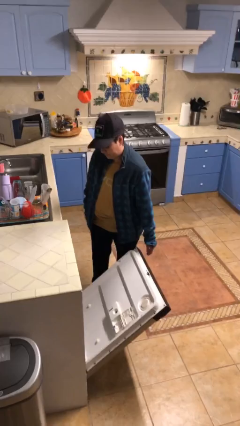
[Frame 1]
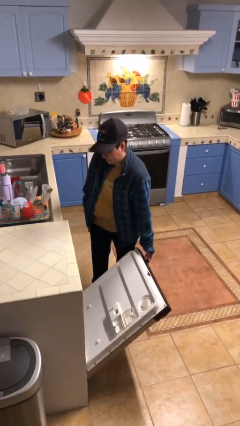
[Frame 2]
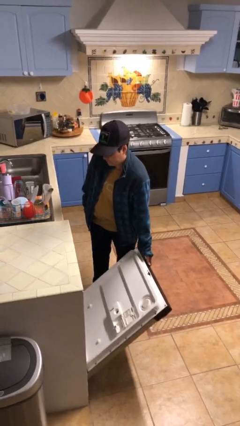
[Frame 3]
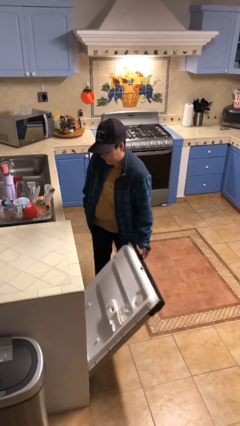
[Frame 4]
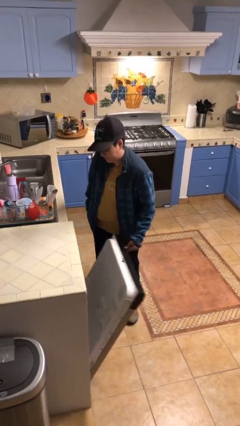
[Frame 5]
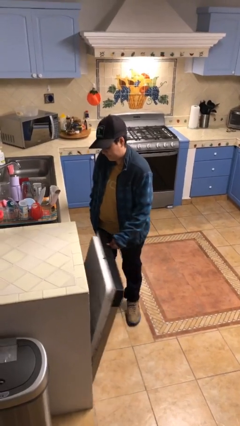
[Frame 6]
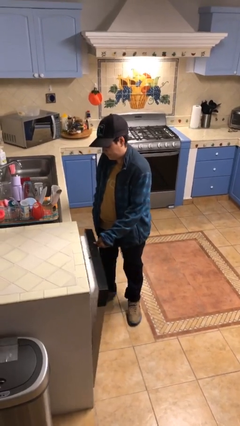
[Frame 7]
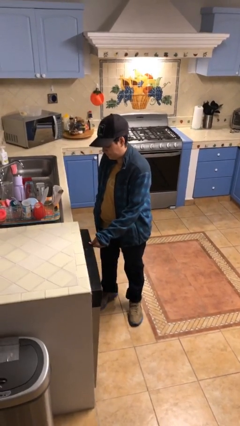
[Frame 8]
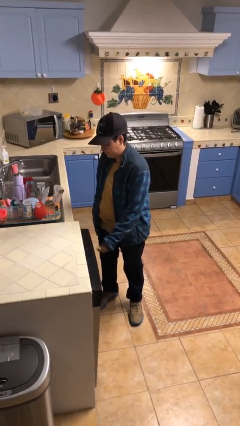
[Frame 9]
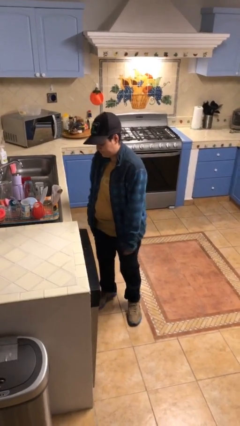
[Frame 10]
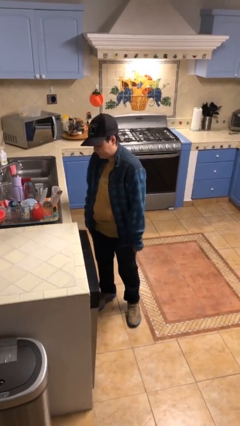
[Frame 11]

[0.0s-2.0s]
person closes dishwasher

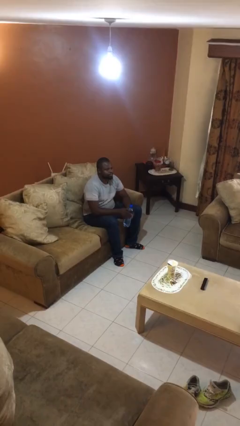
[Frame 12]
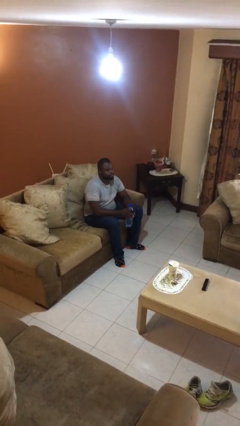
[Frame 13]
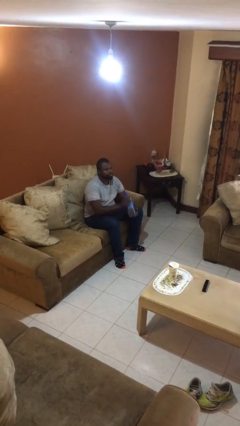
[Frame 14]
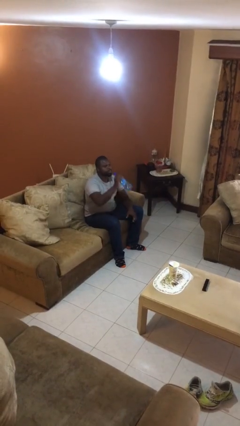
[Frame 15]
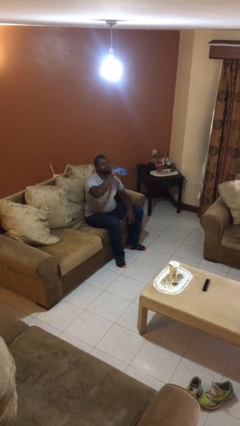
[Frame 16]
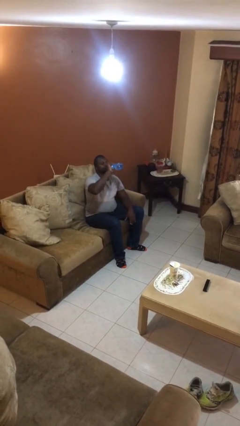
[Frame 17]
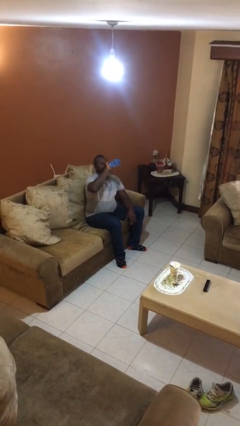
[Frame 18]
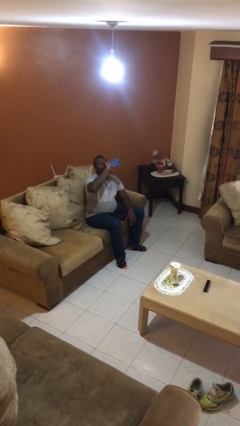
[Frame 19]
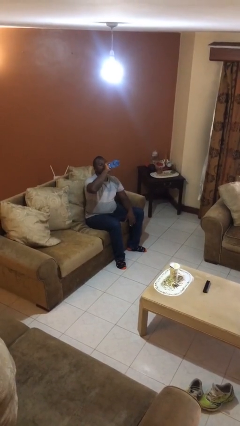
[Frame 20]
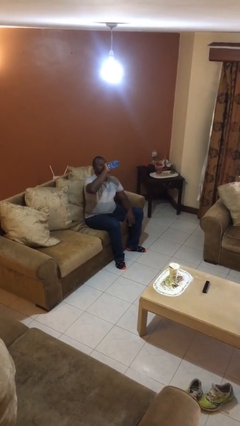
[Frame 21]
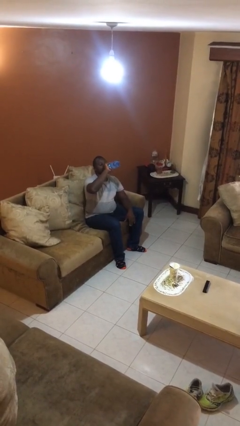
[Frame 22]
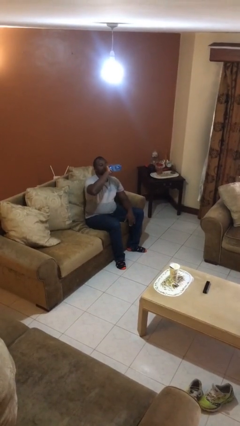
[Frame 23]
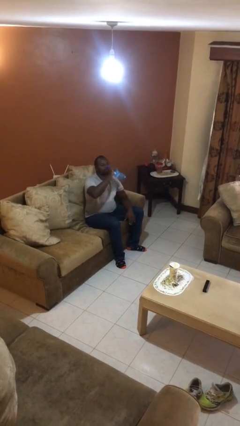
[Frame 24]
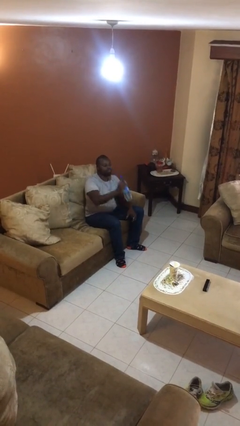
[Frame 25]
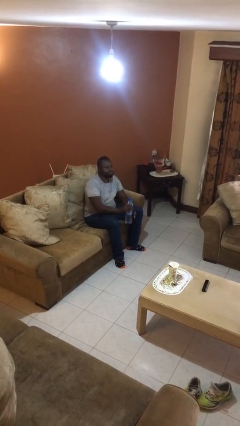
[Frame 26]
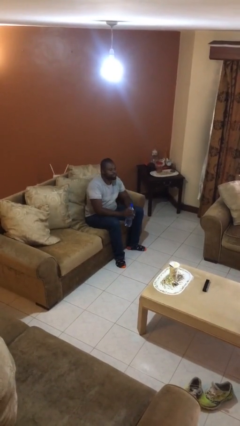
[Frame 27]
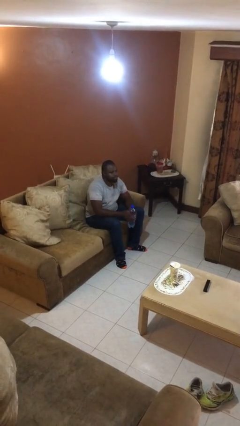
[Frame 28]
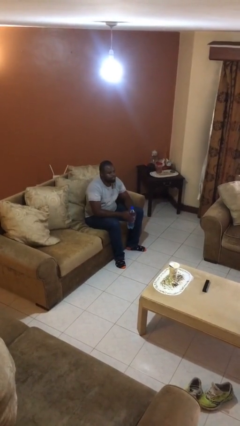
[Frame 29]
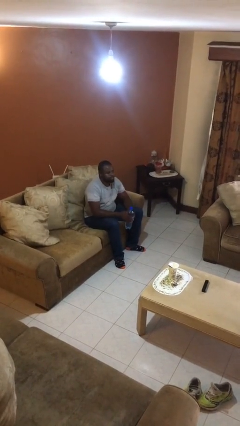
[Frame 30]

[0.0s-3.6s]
person drinks from bottle

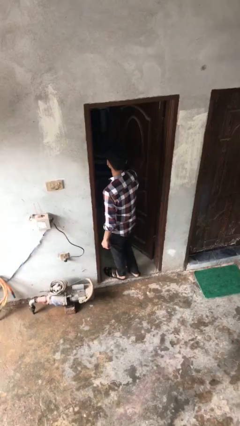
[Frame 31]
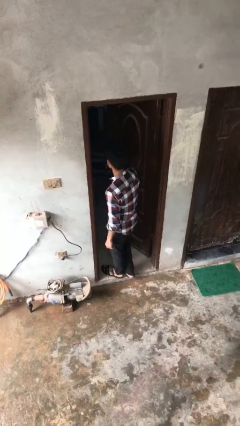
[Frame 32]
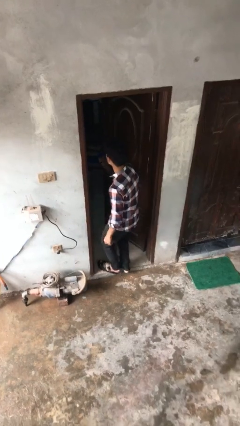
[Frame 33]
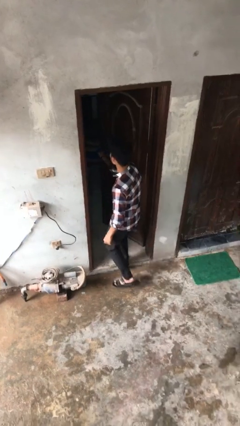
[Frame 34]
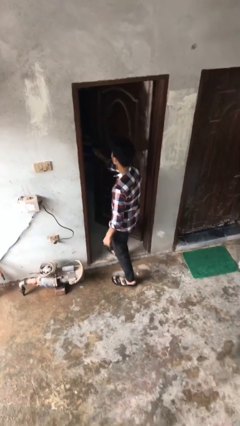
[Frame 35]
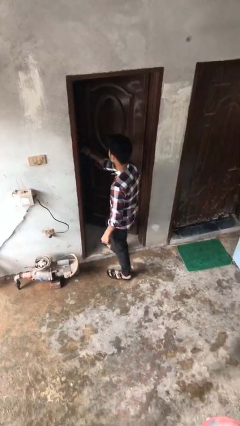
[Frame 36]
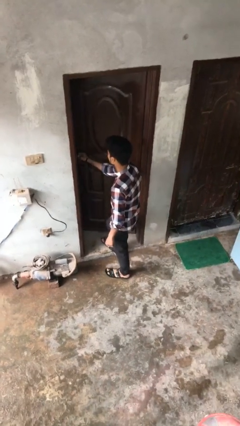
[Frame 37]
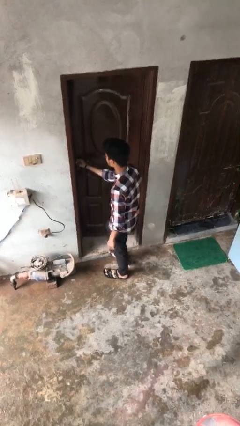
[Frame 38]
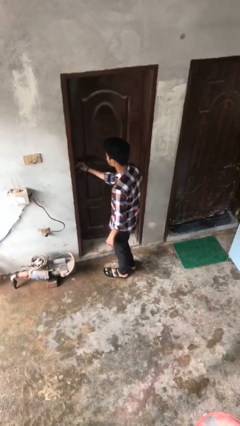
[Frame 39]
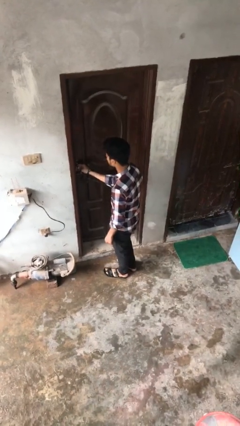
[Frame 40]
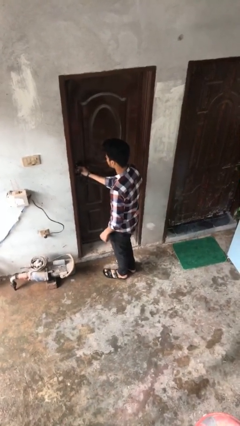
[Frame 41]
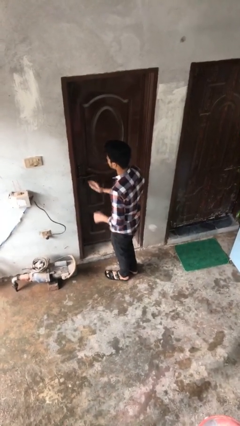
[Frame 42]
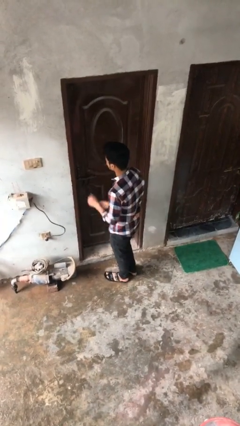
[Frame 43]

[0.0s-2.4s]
person closes facility door

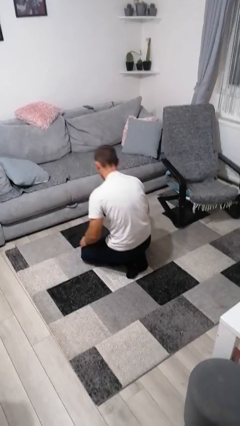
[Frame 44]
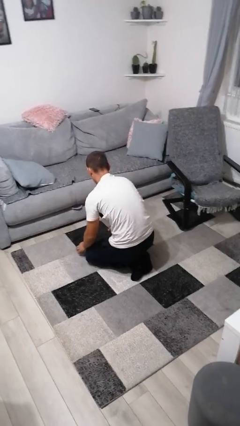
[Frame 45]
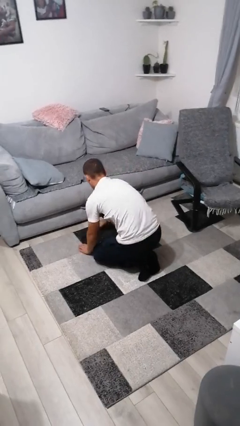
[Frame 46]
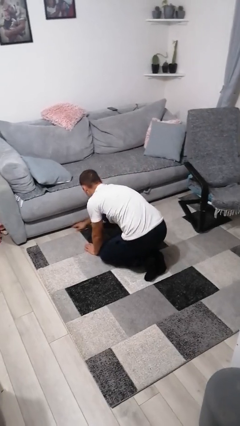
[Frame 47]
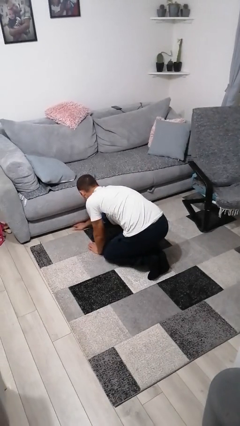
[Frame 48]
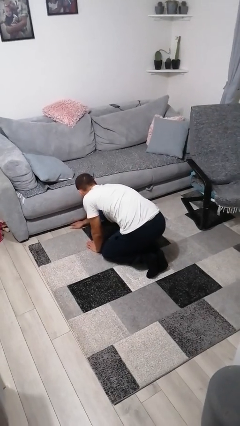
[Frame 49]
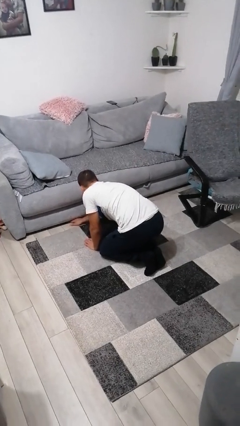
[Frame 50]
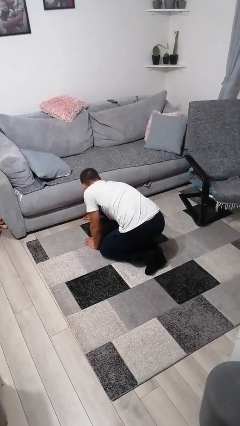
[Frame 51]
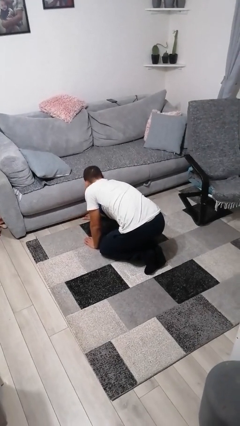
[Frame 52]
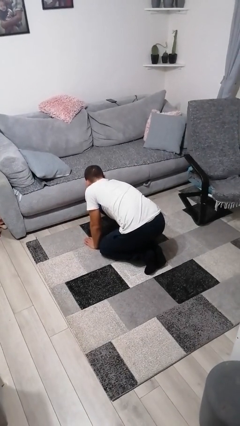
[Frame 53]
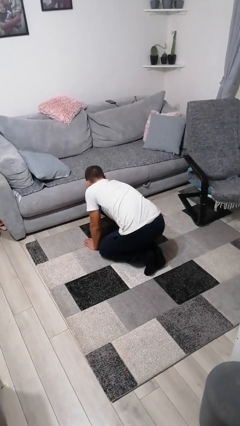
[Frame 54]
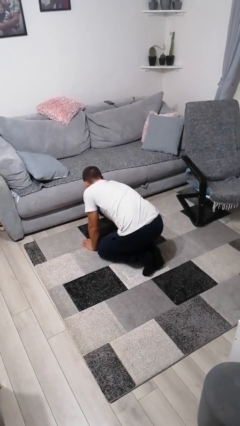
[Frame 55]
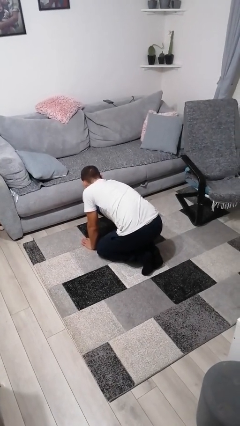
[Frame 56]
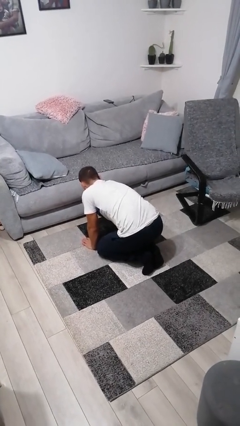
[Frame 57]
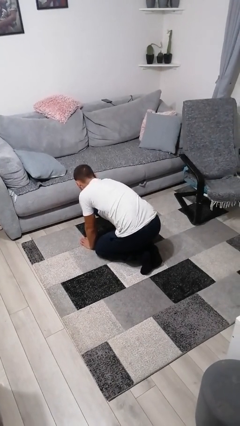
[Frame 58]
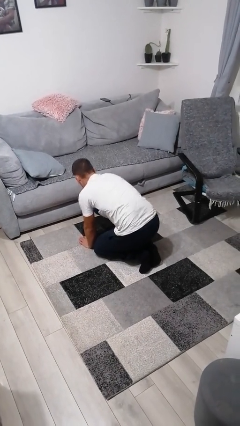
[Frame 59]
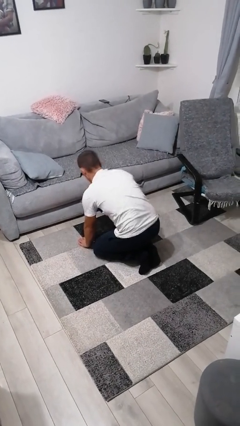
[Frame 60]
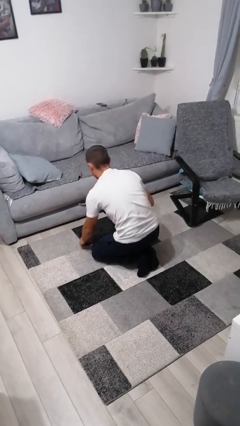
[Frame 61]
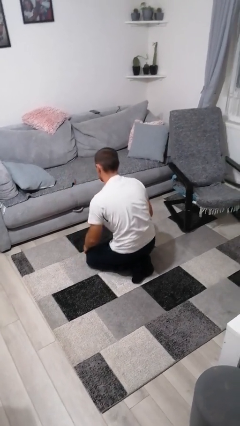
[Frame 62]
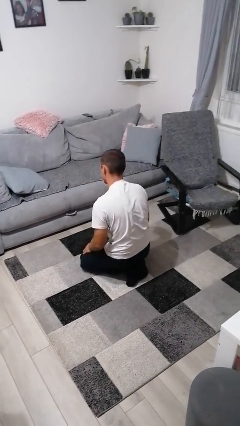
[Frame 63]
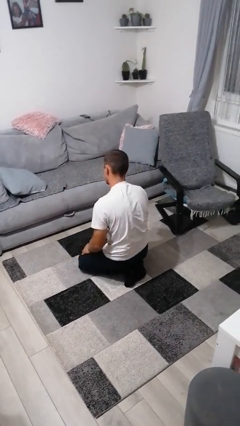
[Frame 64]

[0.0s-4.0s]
person searches under couch

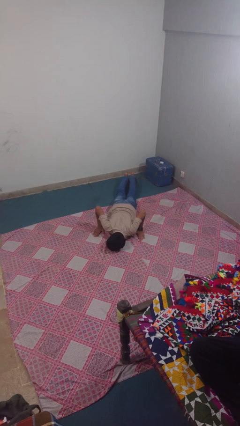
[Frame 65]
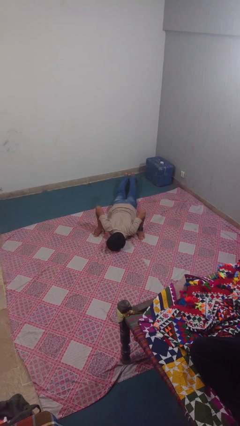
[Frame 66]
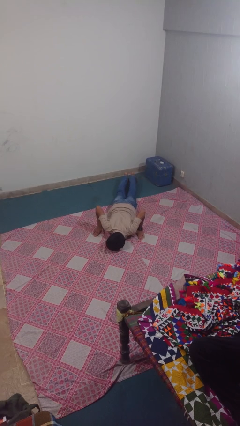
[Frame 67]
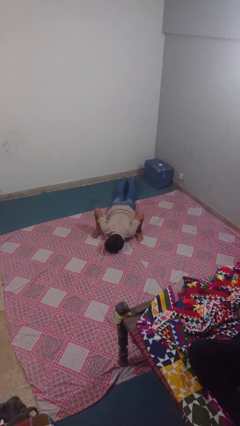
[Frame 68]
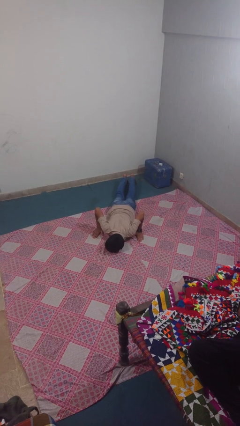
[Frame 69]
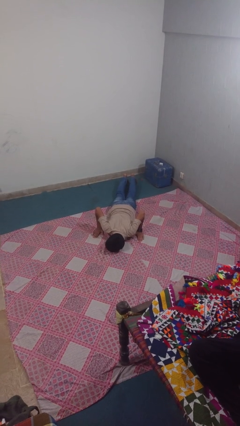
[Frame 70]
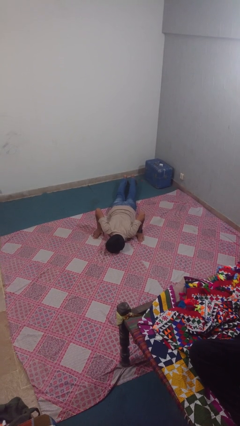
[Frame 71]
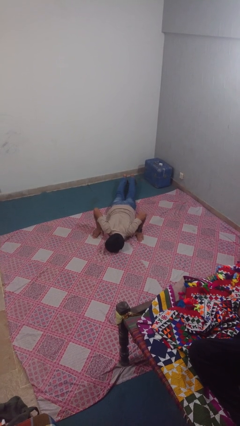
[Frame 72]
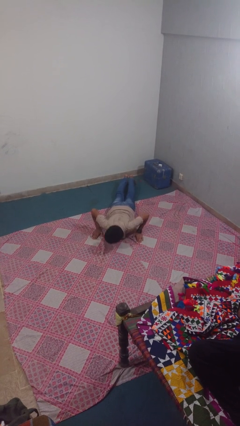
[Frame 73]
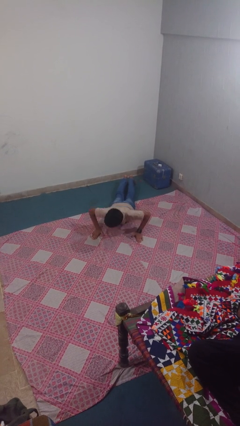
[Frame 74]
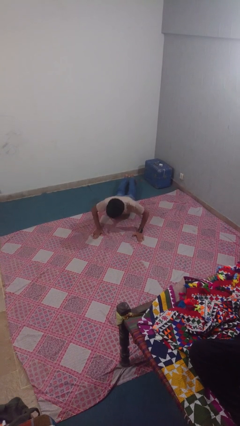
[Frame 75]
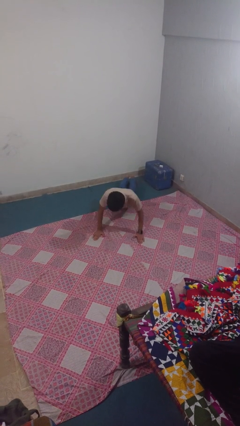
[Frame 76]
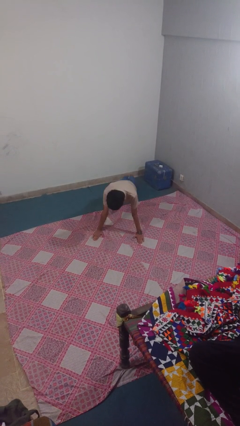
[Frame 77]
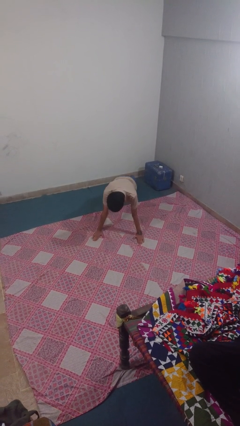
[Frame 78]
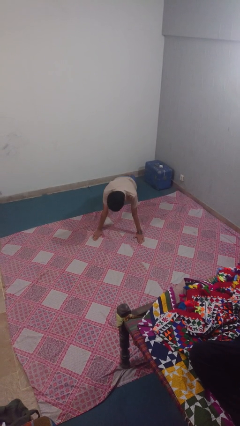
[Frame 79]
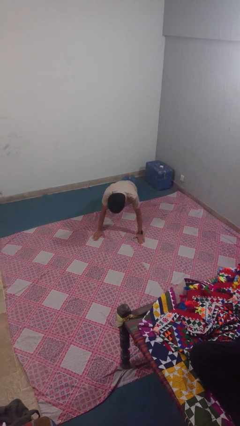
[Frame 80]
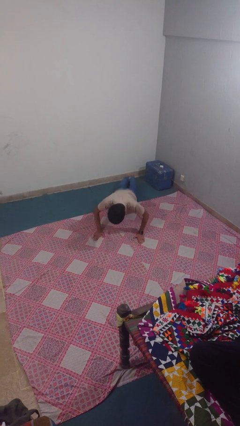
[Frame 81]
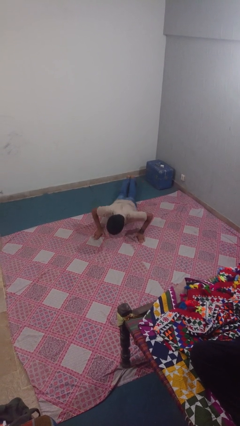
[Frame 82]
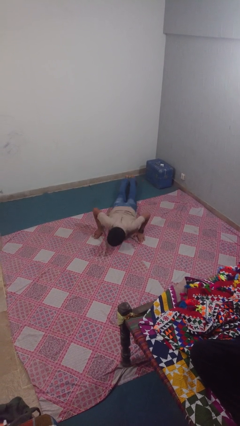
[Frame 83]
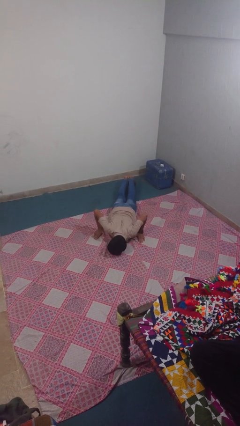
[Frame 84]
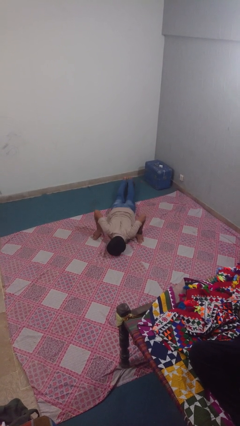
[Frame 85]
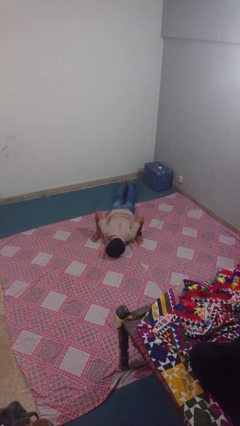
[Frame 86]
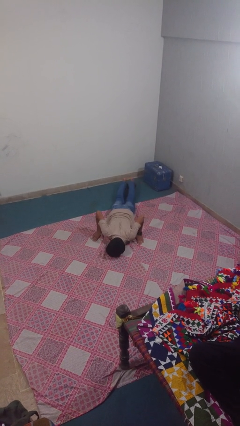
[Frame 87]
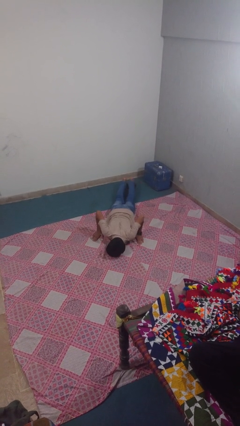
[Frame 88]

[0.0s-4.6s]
person exercises with pushup

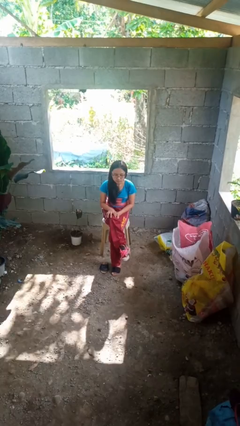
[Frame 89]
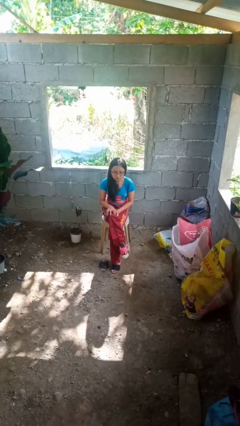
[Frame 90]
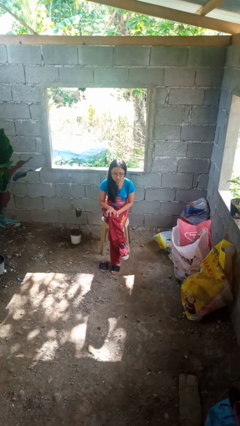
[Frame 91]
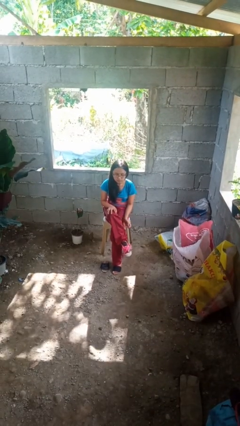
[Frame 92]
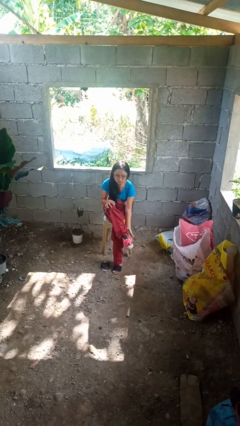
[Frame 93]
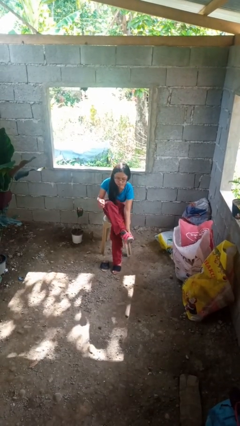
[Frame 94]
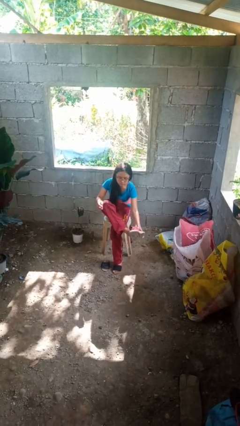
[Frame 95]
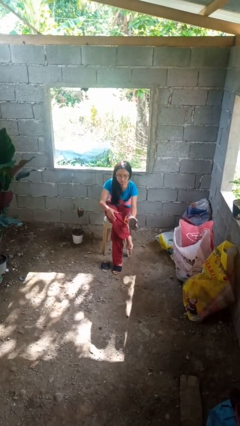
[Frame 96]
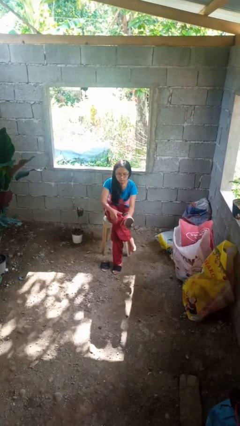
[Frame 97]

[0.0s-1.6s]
person takes off shoes
